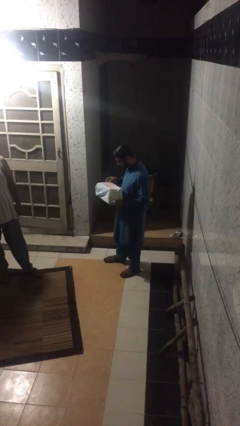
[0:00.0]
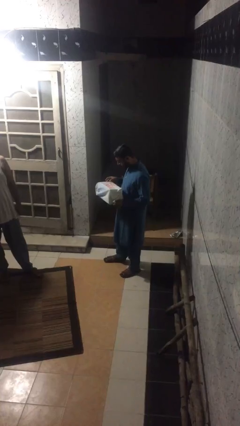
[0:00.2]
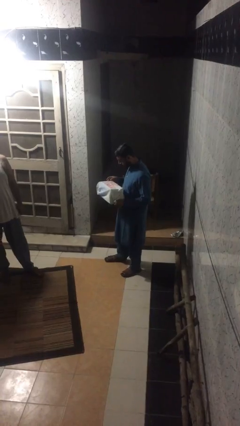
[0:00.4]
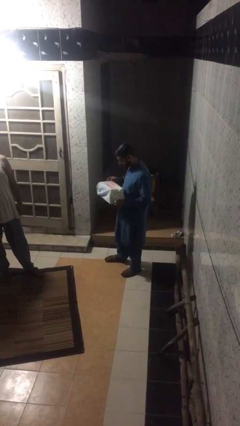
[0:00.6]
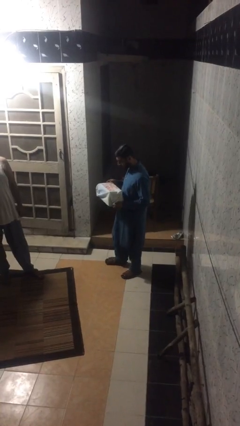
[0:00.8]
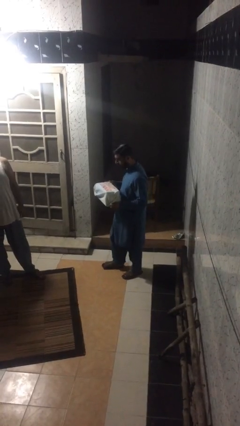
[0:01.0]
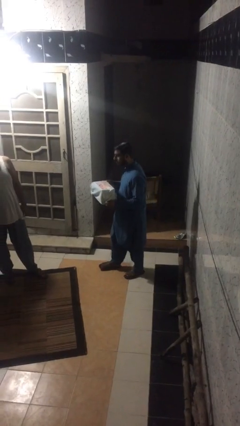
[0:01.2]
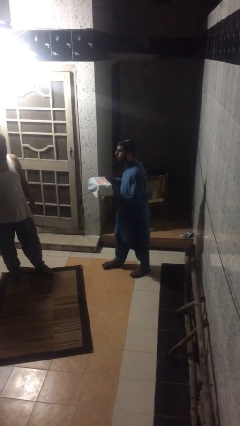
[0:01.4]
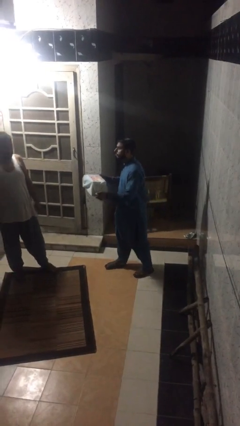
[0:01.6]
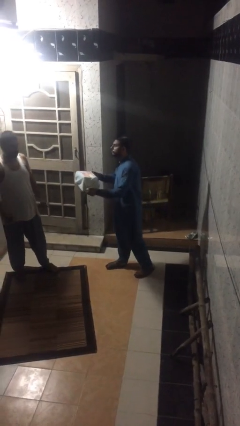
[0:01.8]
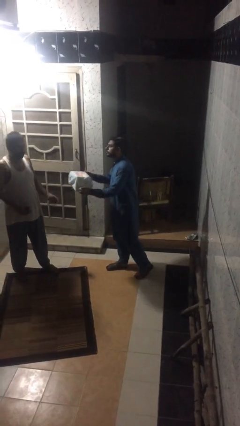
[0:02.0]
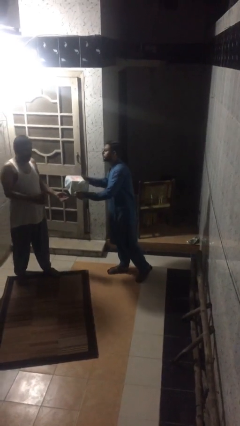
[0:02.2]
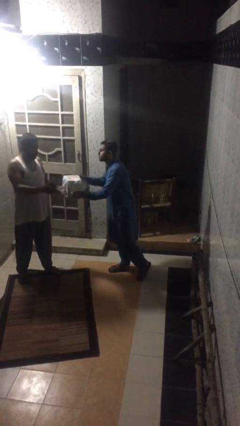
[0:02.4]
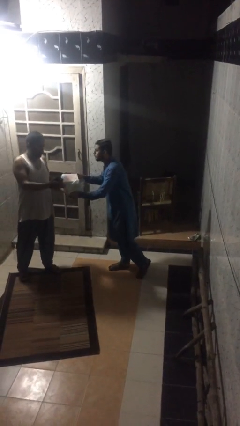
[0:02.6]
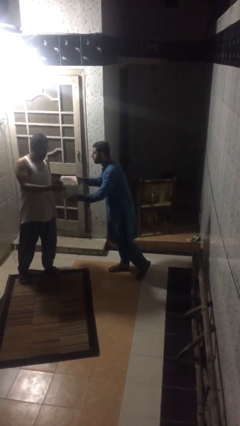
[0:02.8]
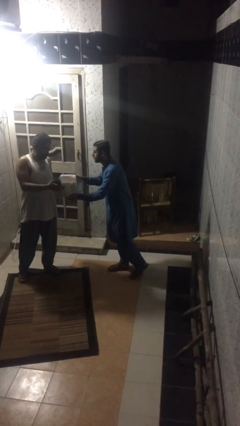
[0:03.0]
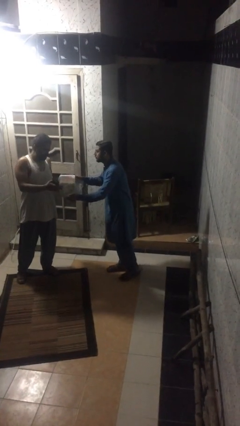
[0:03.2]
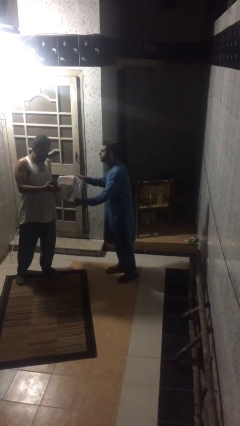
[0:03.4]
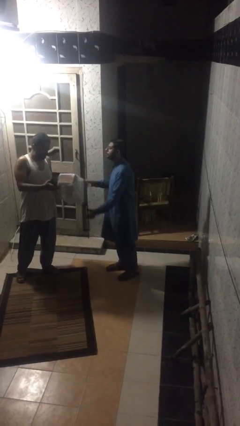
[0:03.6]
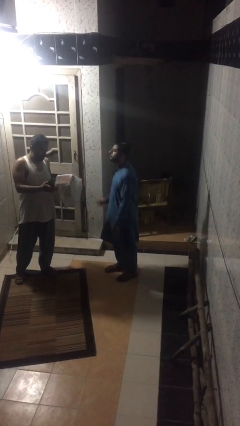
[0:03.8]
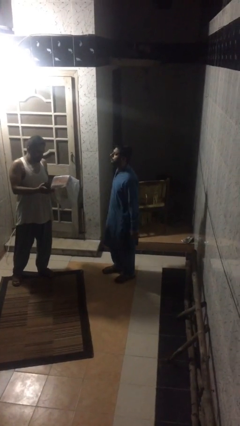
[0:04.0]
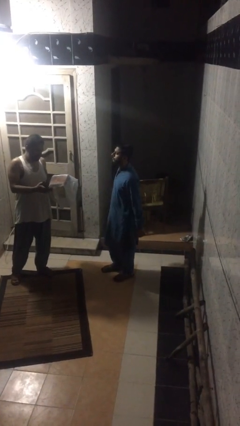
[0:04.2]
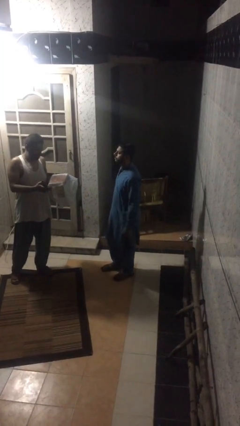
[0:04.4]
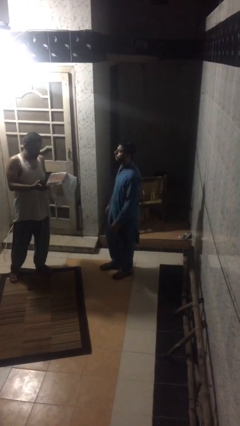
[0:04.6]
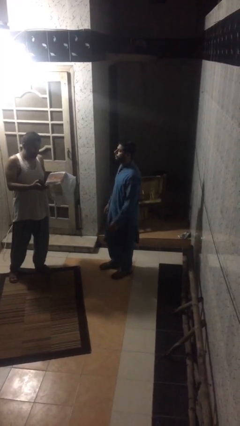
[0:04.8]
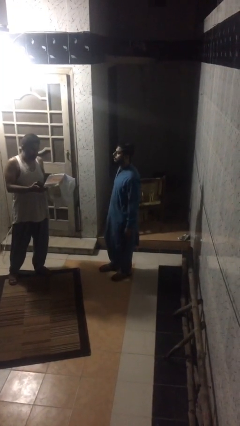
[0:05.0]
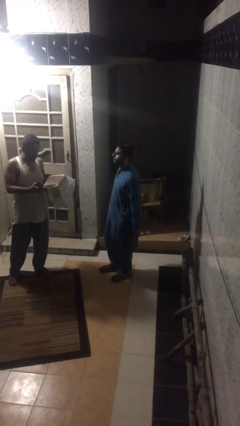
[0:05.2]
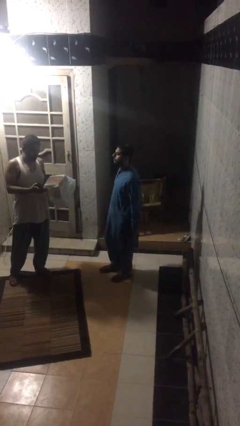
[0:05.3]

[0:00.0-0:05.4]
person transfers object to person

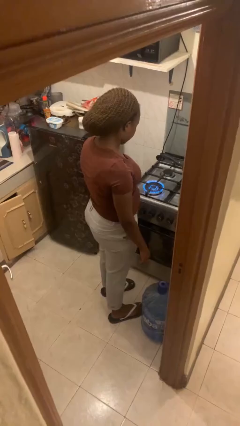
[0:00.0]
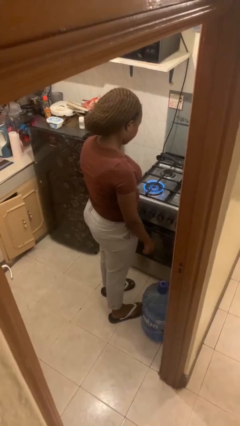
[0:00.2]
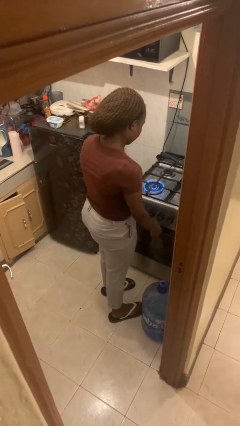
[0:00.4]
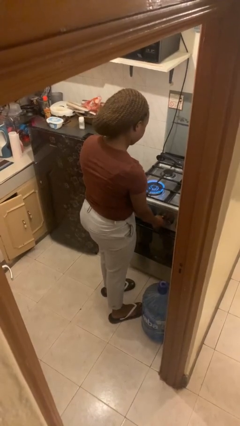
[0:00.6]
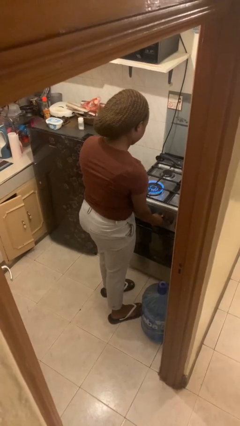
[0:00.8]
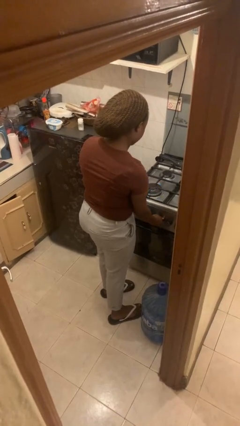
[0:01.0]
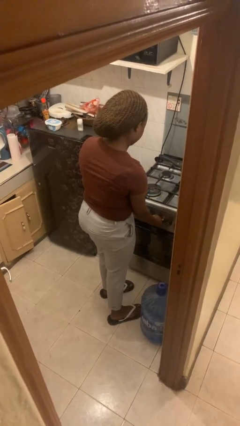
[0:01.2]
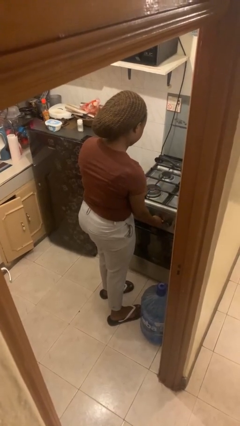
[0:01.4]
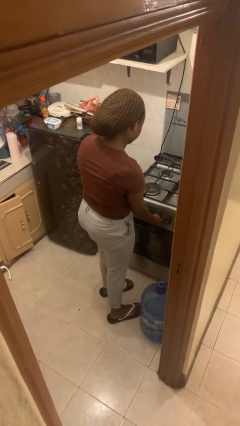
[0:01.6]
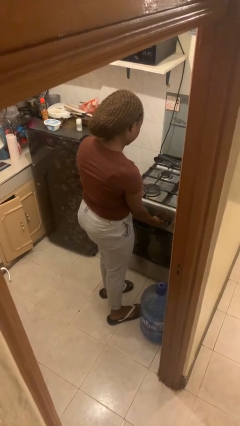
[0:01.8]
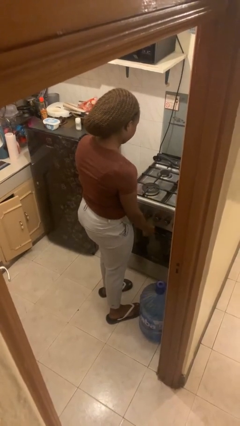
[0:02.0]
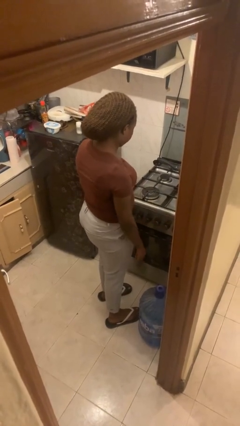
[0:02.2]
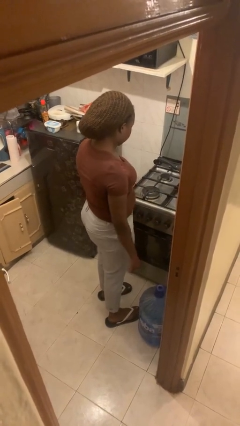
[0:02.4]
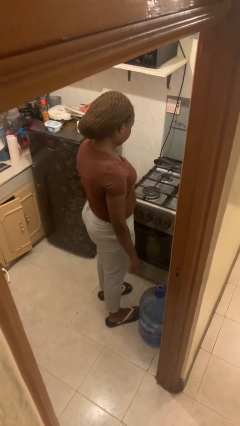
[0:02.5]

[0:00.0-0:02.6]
person turns off stovetop

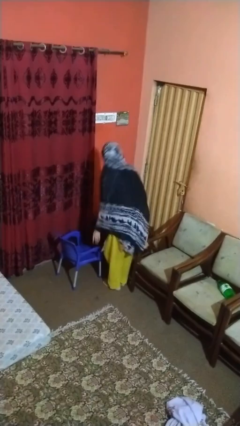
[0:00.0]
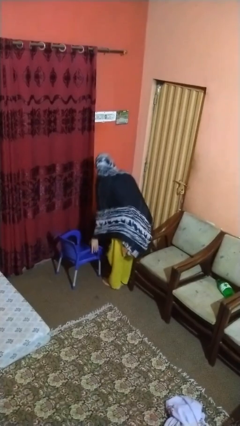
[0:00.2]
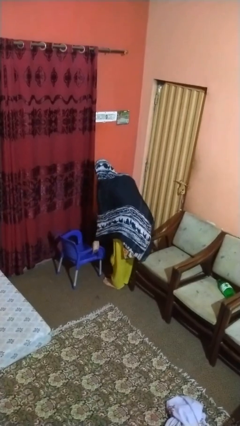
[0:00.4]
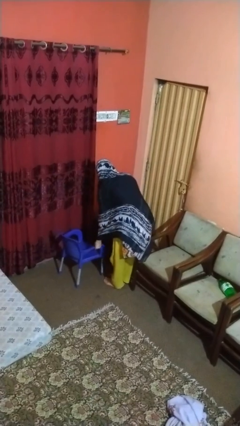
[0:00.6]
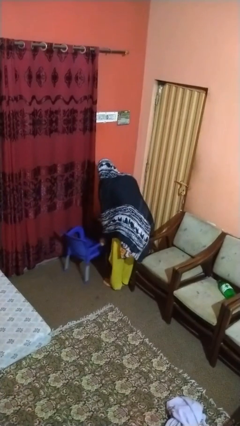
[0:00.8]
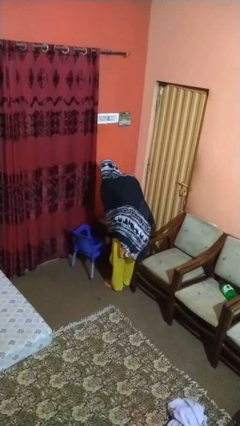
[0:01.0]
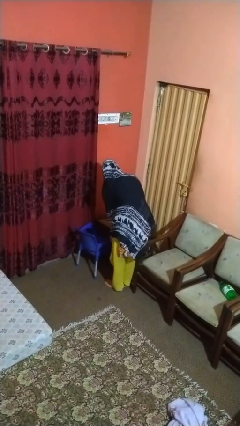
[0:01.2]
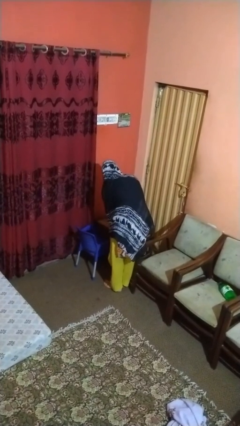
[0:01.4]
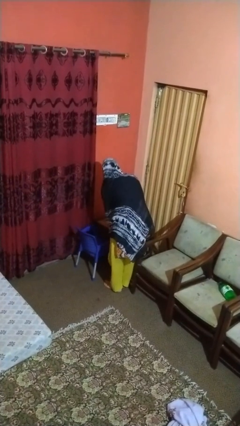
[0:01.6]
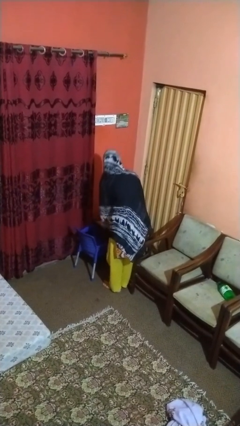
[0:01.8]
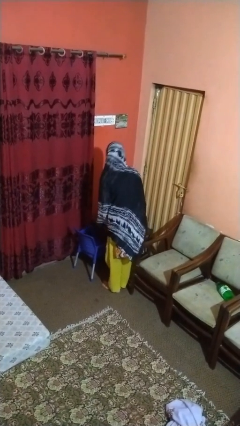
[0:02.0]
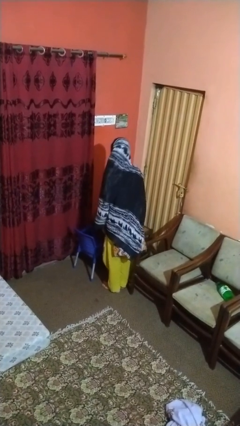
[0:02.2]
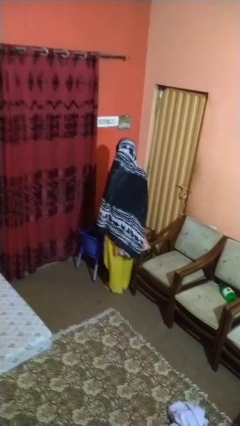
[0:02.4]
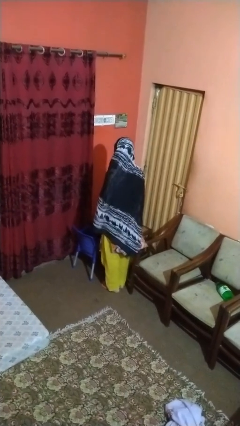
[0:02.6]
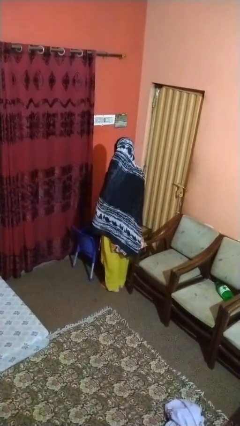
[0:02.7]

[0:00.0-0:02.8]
person pushes in chair

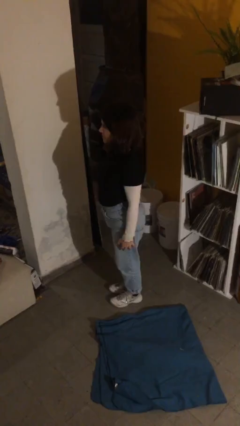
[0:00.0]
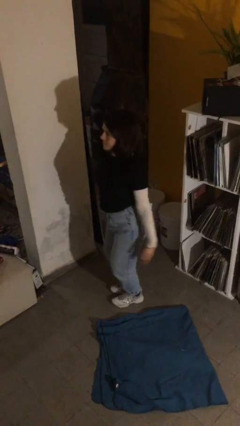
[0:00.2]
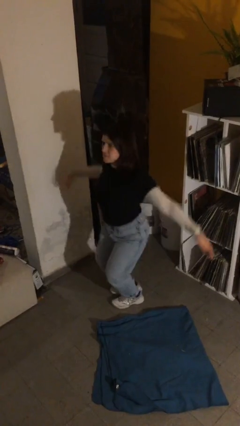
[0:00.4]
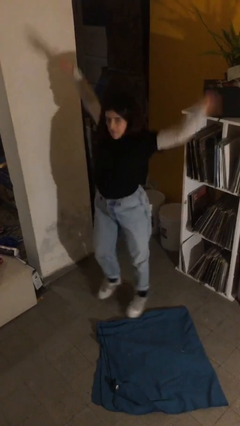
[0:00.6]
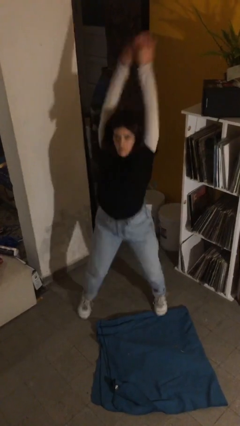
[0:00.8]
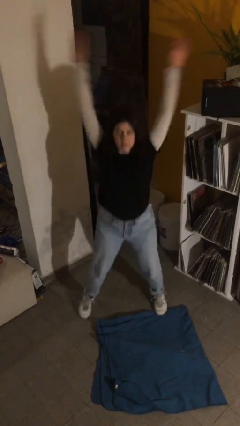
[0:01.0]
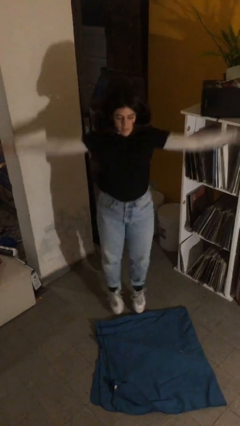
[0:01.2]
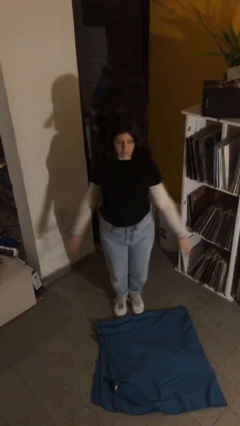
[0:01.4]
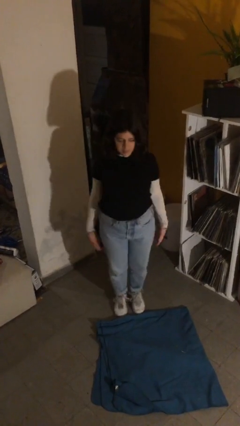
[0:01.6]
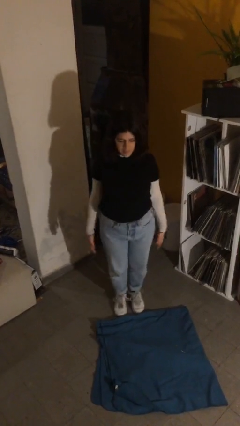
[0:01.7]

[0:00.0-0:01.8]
person exercises with jumping jacks

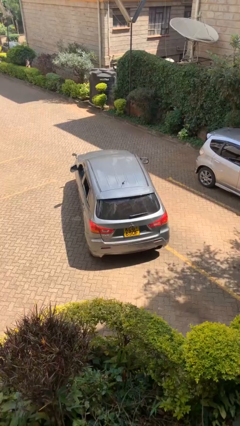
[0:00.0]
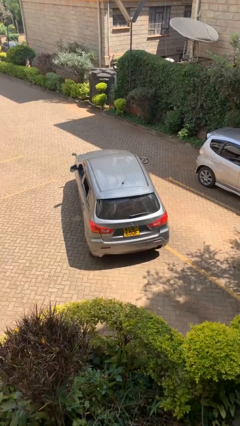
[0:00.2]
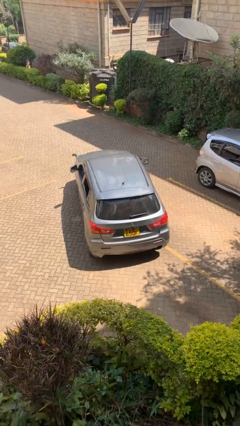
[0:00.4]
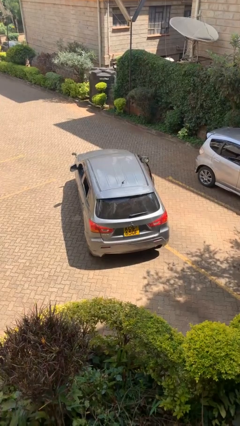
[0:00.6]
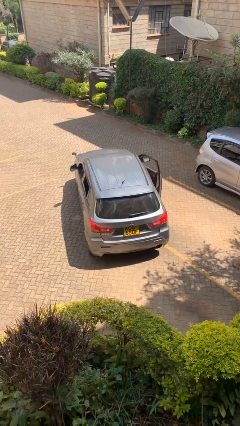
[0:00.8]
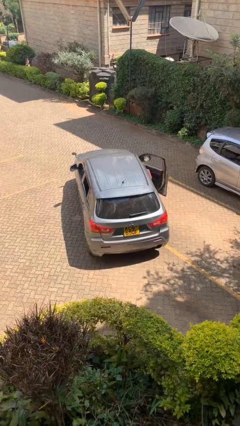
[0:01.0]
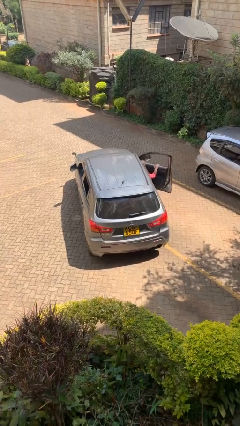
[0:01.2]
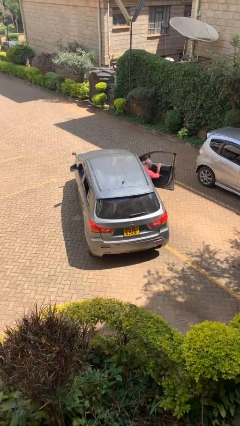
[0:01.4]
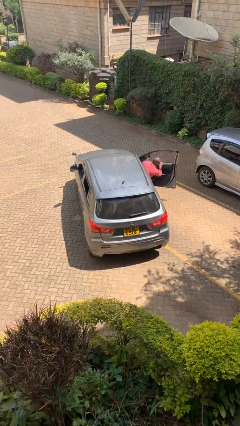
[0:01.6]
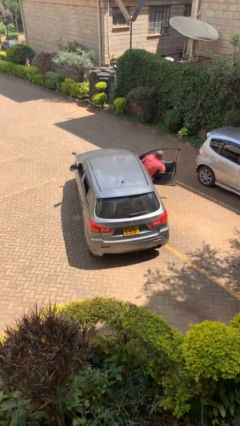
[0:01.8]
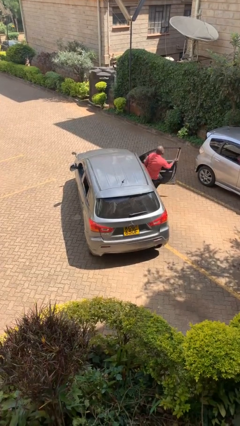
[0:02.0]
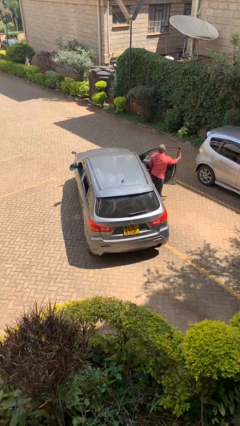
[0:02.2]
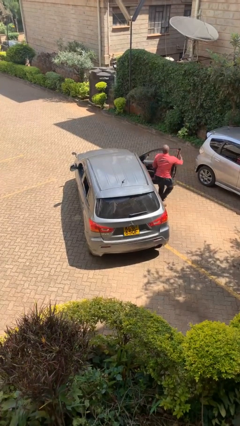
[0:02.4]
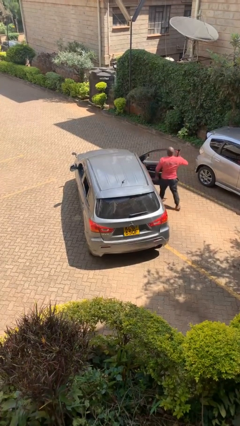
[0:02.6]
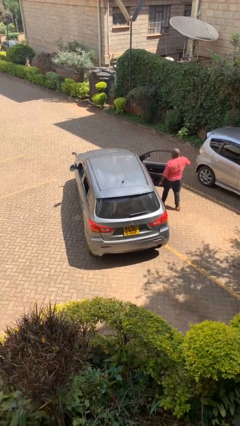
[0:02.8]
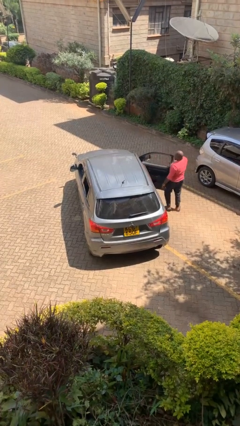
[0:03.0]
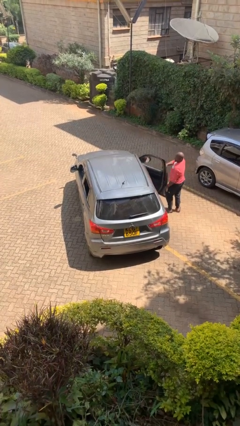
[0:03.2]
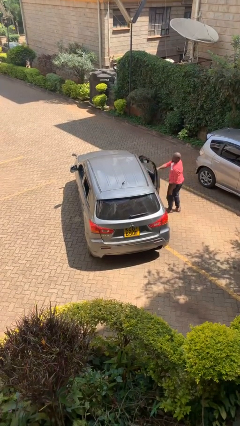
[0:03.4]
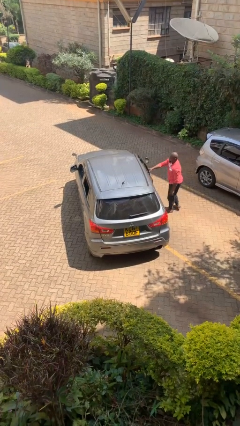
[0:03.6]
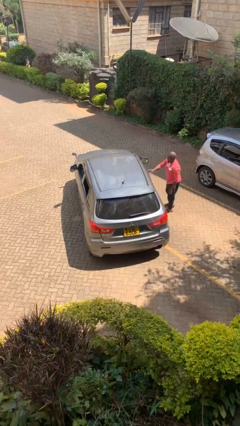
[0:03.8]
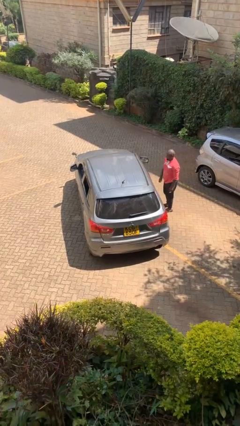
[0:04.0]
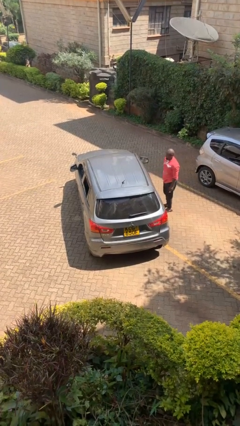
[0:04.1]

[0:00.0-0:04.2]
car drops off person

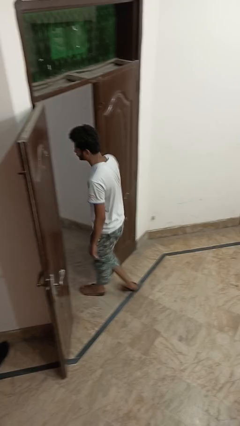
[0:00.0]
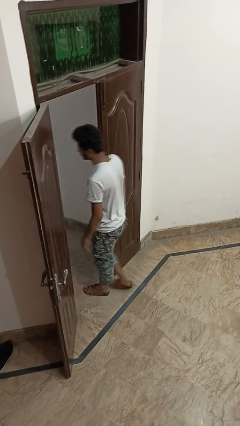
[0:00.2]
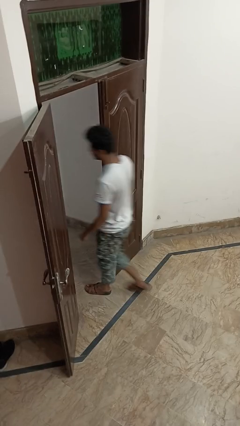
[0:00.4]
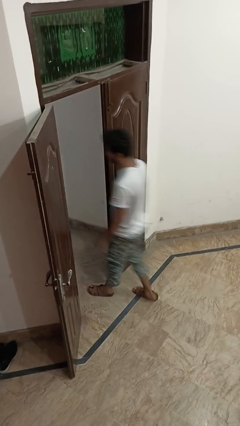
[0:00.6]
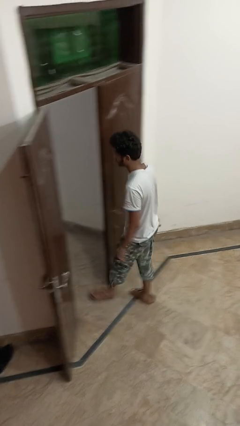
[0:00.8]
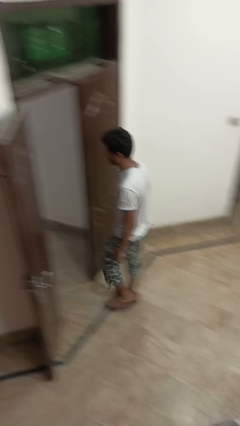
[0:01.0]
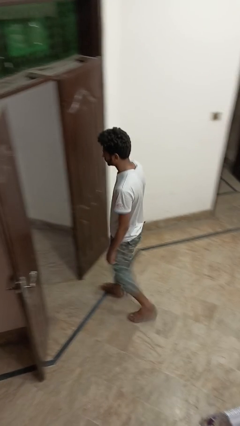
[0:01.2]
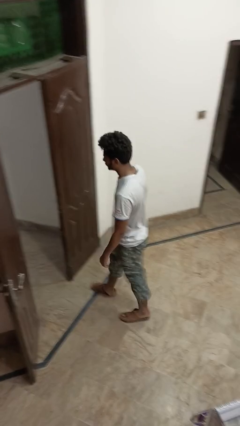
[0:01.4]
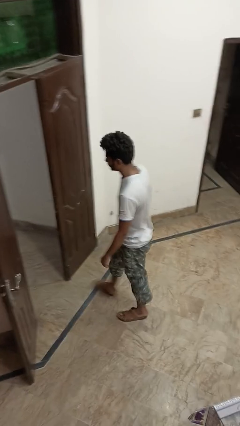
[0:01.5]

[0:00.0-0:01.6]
person bumps into wall
